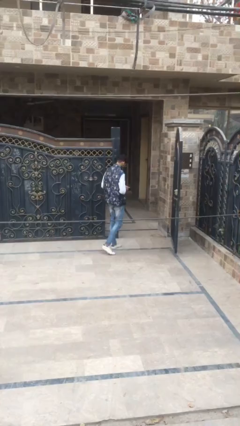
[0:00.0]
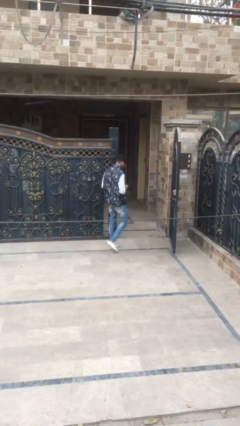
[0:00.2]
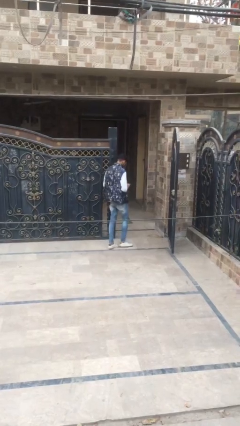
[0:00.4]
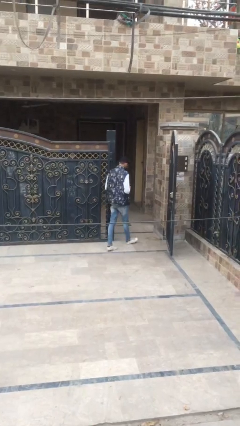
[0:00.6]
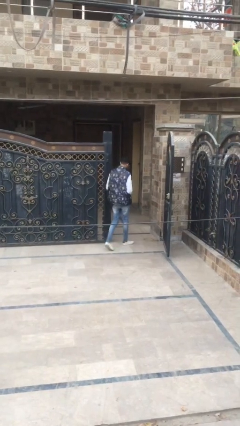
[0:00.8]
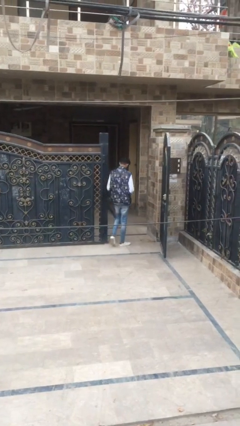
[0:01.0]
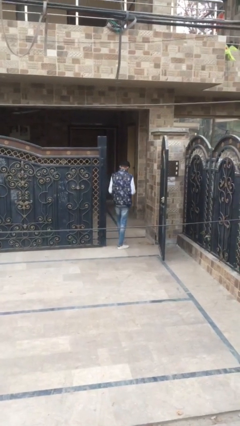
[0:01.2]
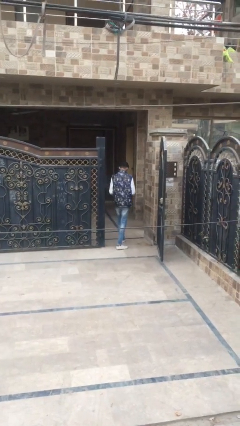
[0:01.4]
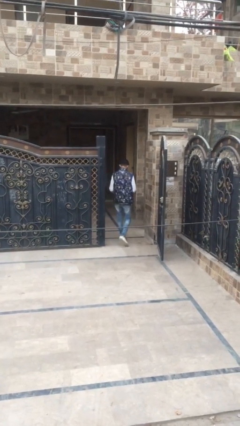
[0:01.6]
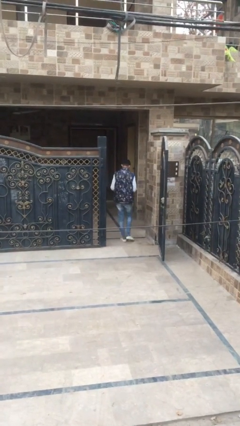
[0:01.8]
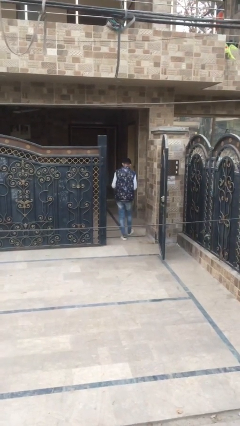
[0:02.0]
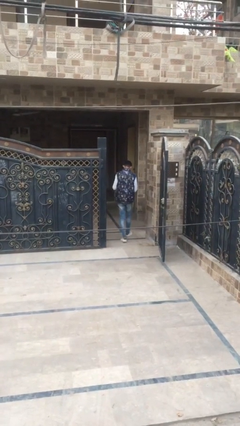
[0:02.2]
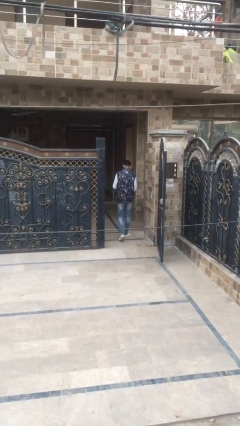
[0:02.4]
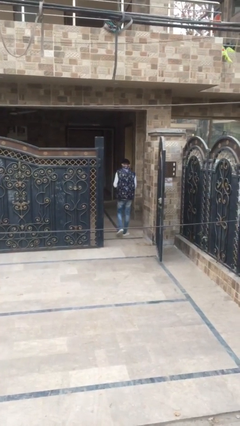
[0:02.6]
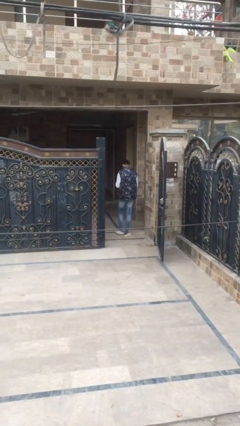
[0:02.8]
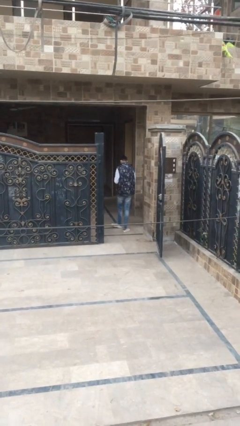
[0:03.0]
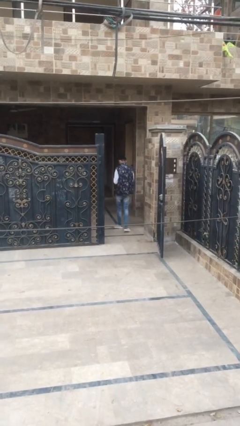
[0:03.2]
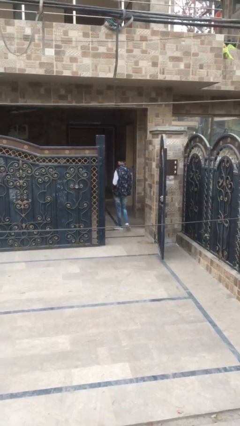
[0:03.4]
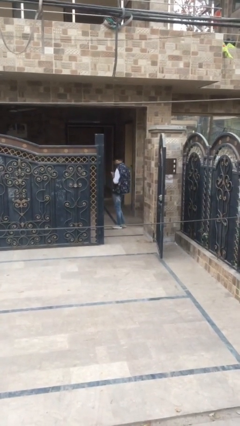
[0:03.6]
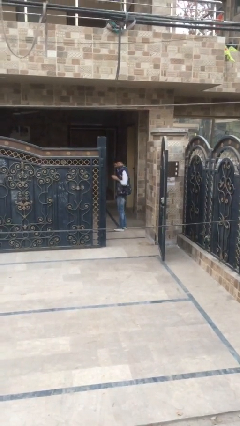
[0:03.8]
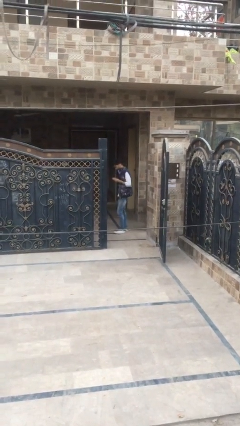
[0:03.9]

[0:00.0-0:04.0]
person enters scene through structure

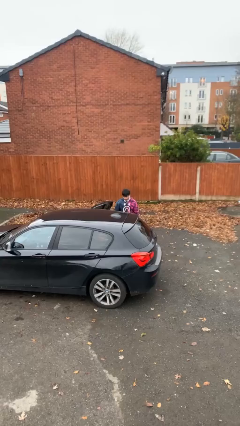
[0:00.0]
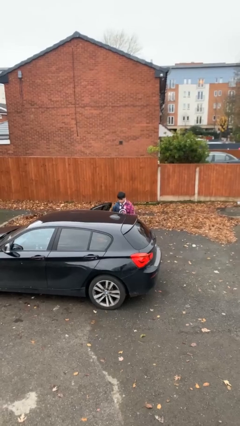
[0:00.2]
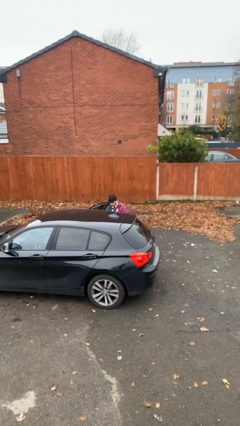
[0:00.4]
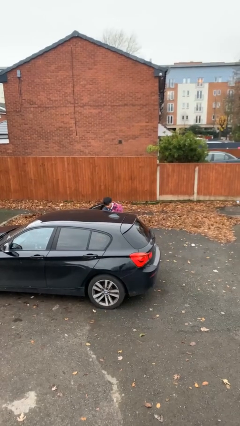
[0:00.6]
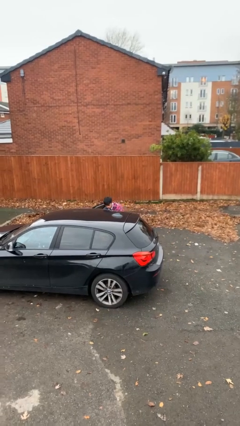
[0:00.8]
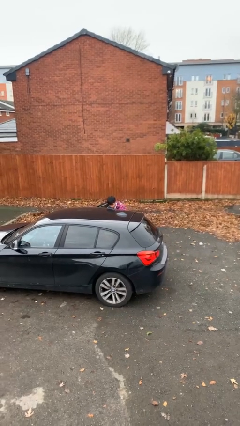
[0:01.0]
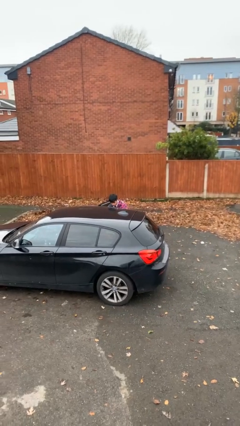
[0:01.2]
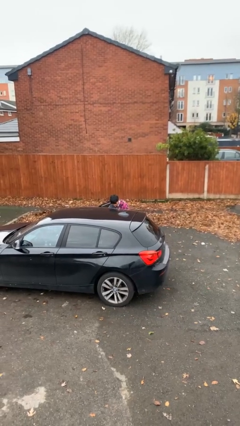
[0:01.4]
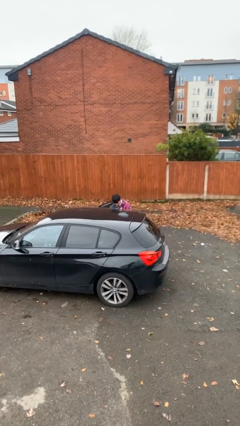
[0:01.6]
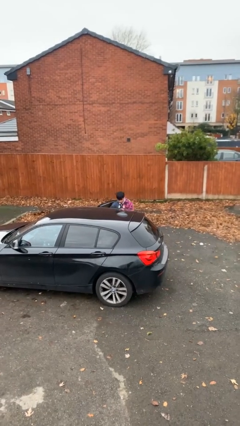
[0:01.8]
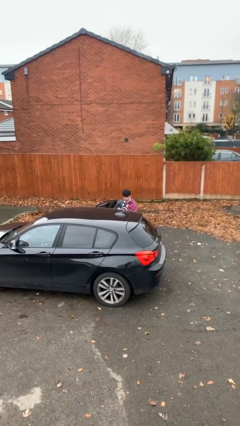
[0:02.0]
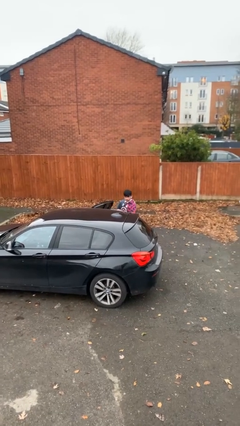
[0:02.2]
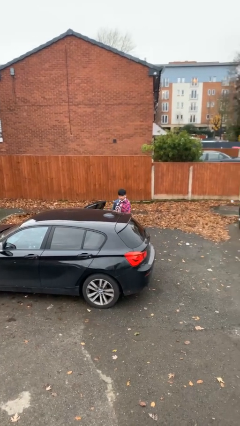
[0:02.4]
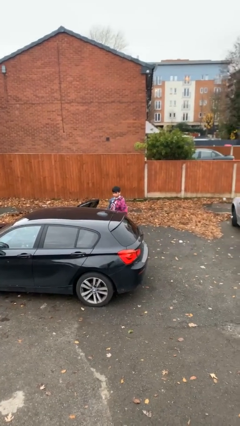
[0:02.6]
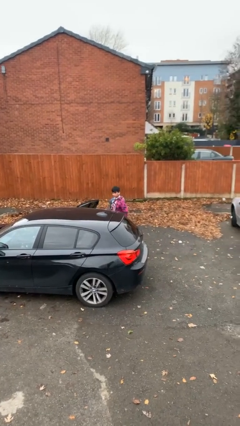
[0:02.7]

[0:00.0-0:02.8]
person unloads car

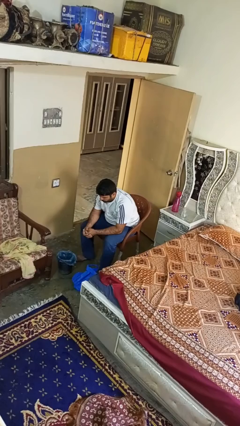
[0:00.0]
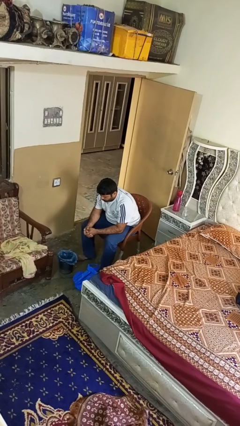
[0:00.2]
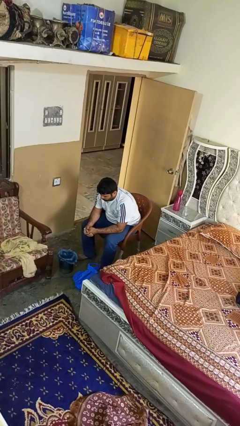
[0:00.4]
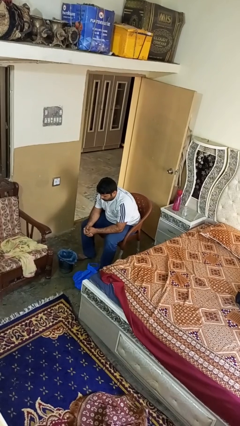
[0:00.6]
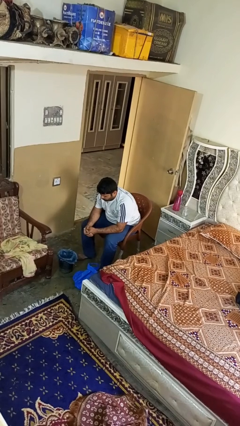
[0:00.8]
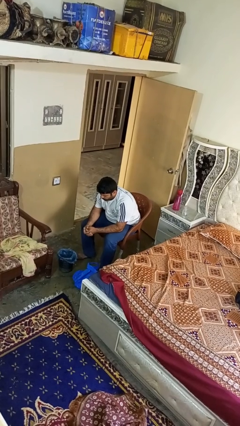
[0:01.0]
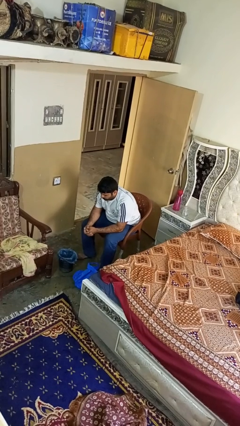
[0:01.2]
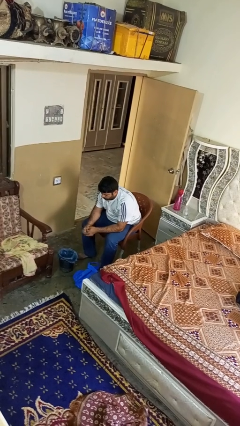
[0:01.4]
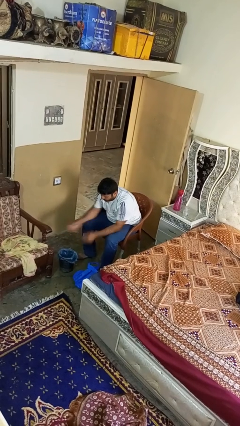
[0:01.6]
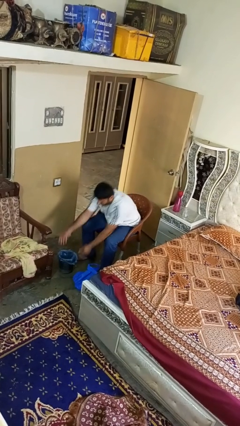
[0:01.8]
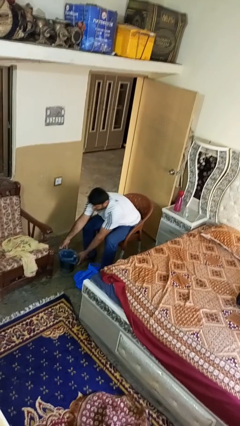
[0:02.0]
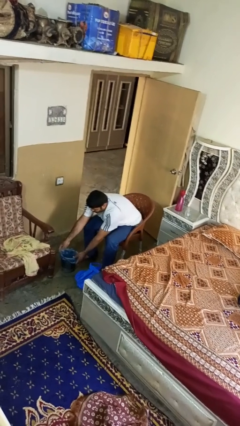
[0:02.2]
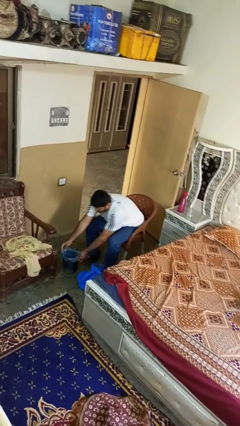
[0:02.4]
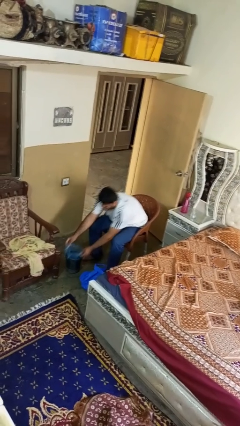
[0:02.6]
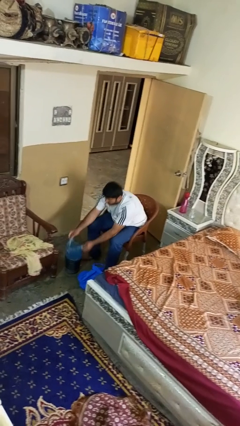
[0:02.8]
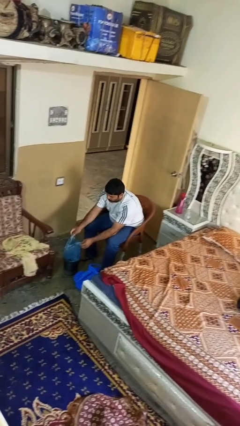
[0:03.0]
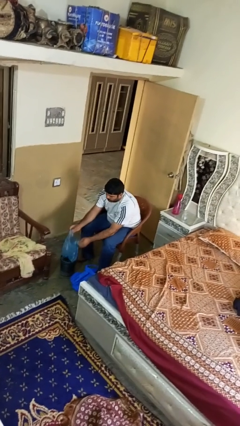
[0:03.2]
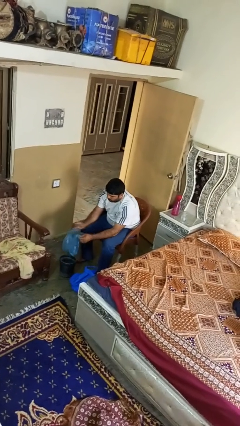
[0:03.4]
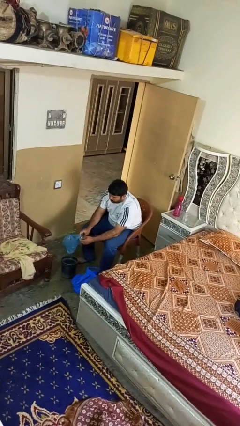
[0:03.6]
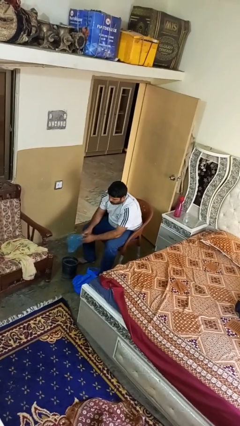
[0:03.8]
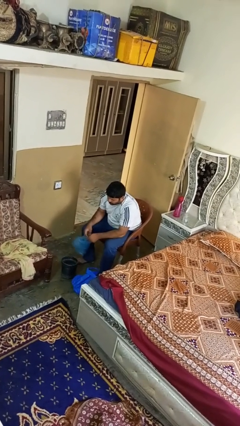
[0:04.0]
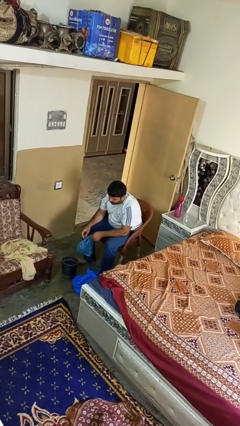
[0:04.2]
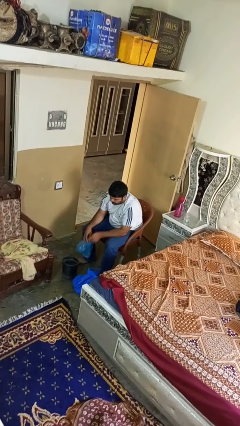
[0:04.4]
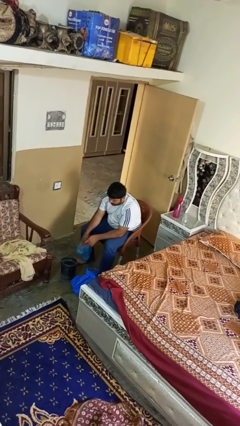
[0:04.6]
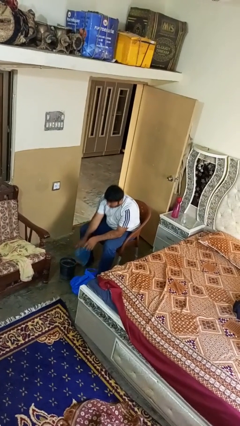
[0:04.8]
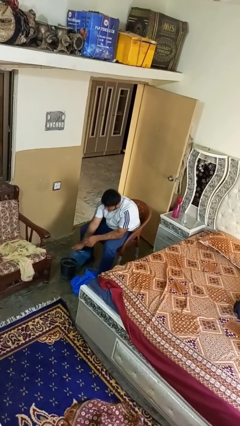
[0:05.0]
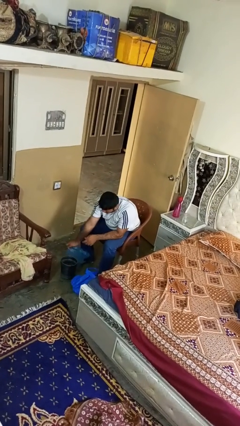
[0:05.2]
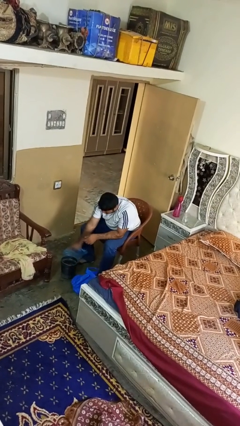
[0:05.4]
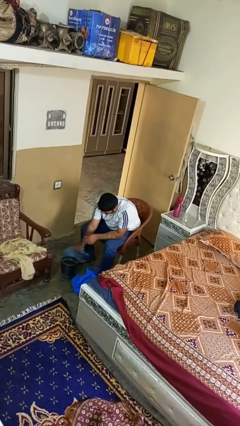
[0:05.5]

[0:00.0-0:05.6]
person removes trashbag from trashcan

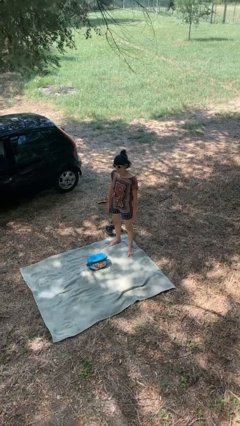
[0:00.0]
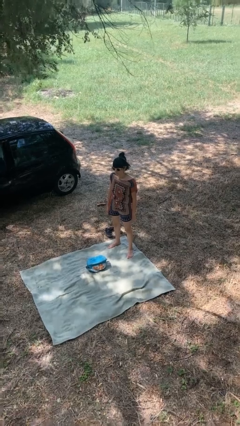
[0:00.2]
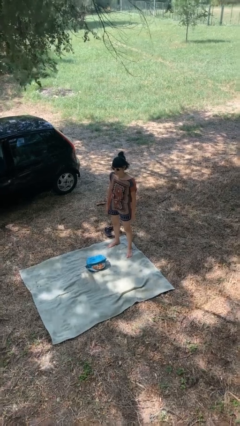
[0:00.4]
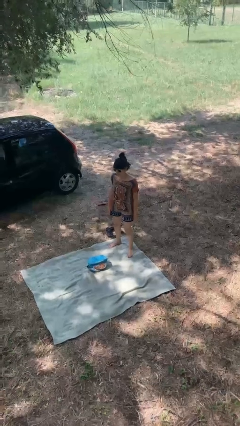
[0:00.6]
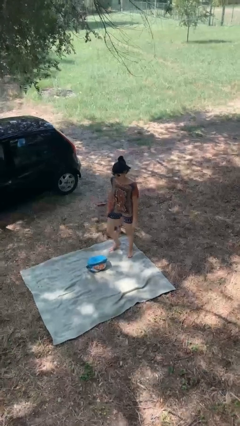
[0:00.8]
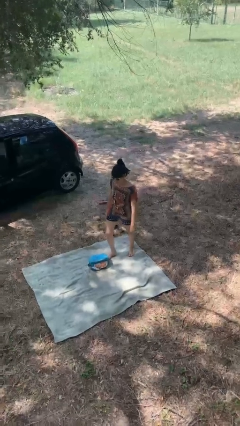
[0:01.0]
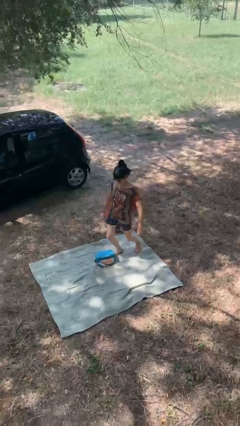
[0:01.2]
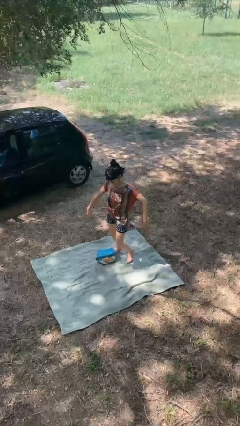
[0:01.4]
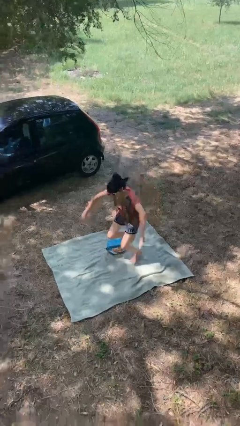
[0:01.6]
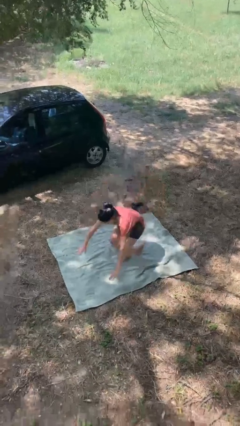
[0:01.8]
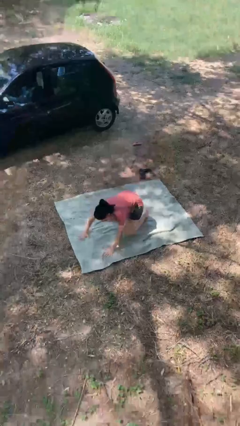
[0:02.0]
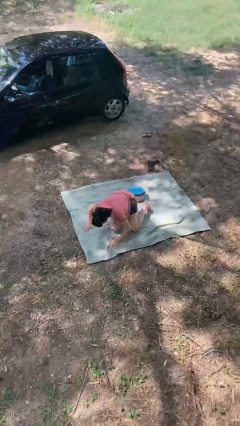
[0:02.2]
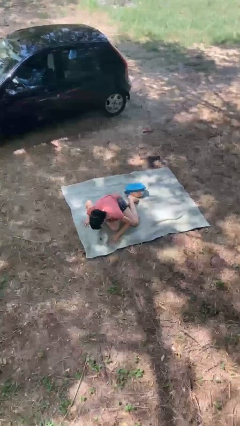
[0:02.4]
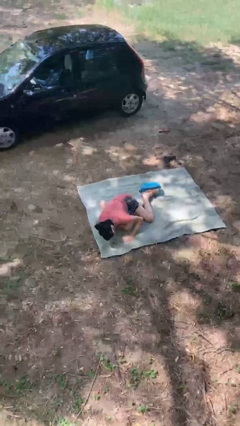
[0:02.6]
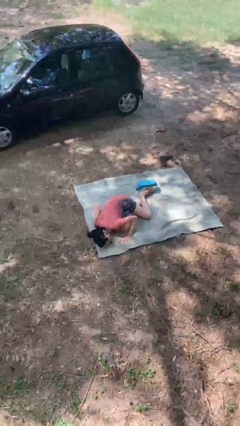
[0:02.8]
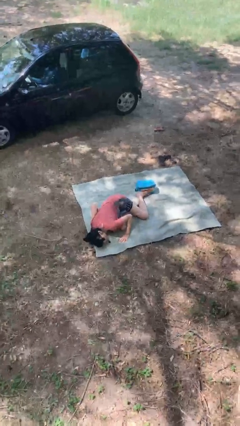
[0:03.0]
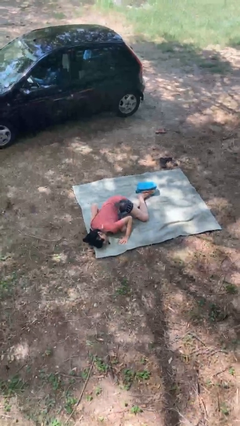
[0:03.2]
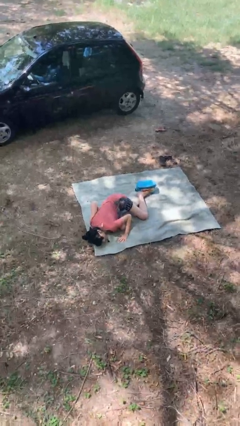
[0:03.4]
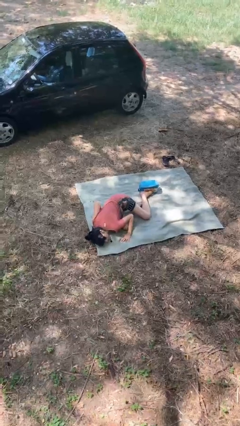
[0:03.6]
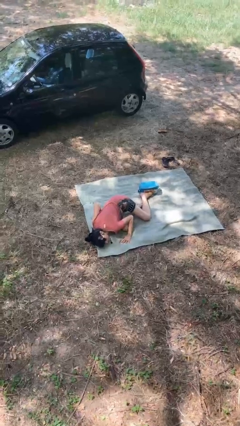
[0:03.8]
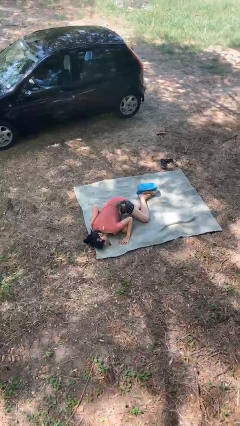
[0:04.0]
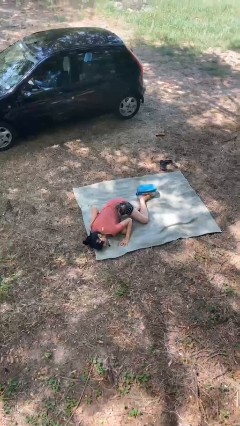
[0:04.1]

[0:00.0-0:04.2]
person trips on object on floor

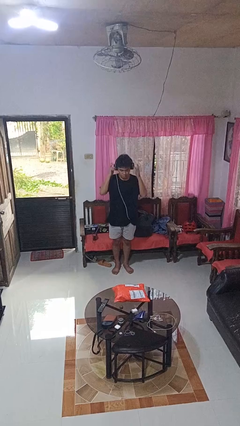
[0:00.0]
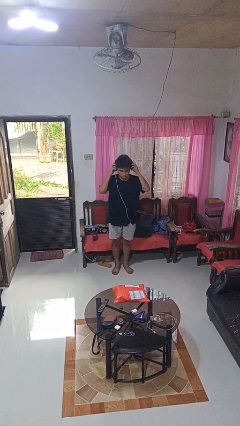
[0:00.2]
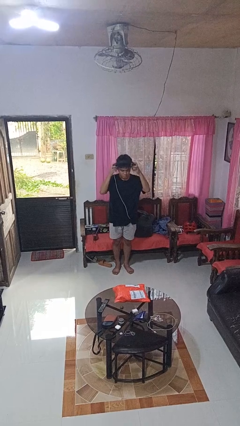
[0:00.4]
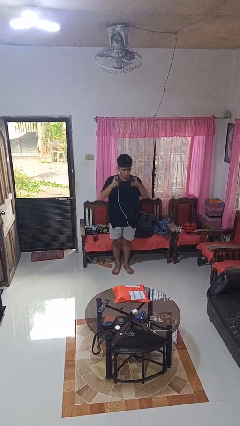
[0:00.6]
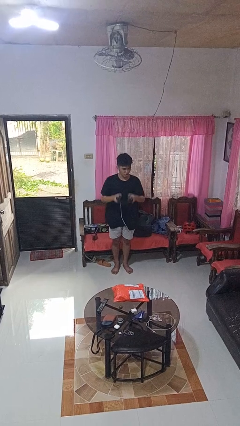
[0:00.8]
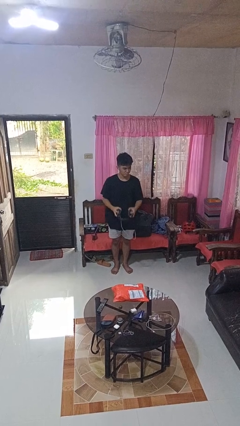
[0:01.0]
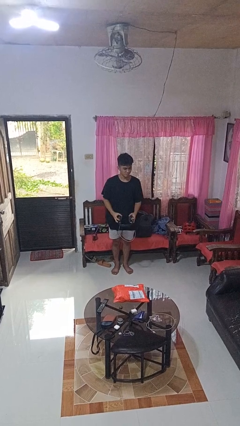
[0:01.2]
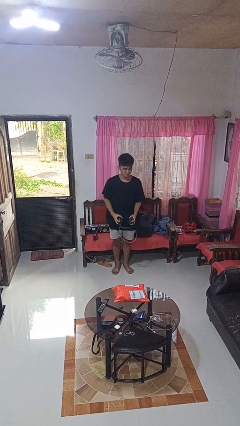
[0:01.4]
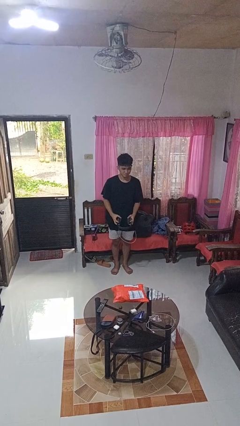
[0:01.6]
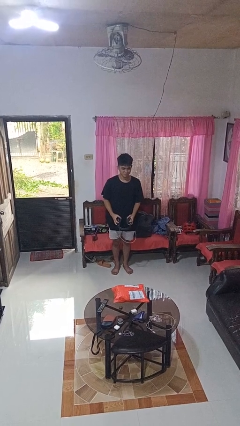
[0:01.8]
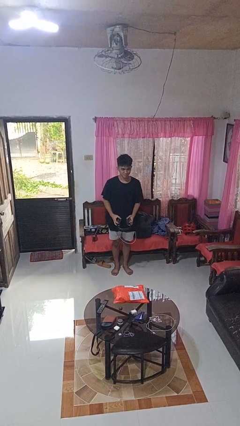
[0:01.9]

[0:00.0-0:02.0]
person takes off headphones
